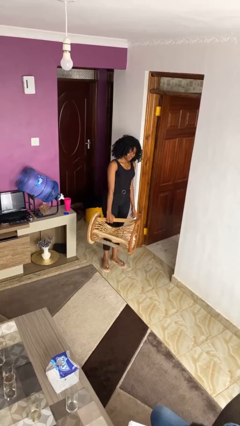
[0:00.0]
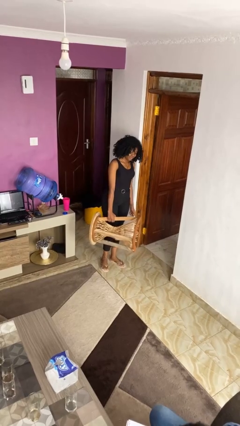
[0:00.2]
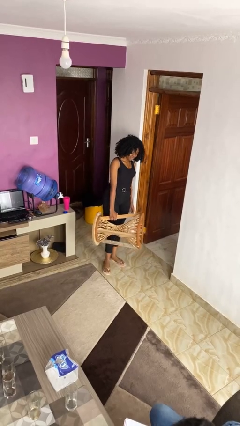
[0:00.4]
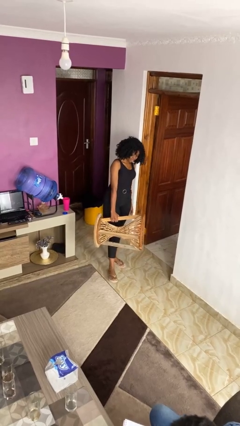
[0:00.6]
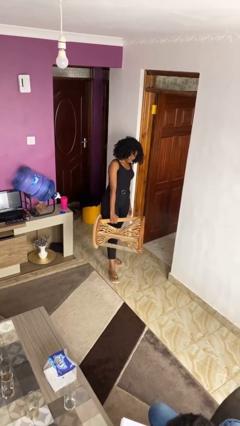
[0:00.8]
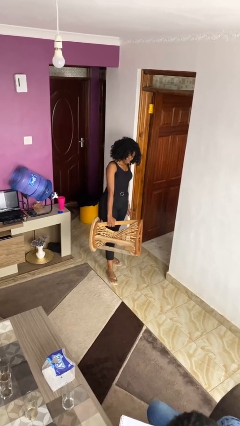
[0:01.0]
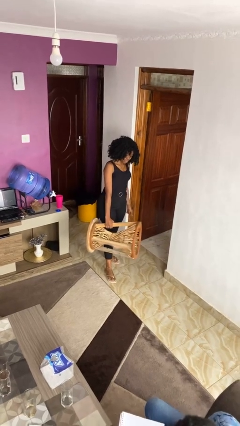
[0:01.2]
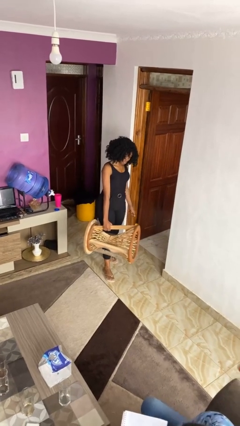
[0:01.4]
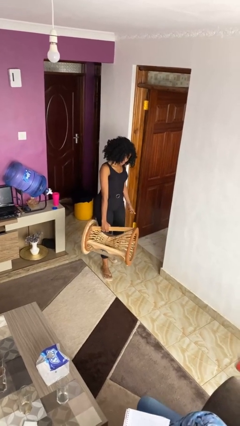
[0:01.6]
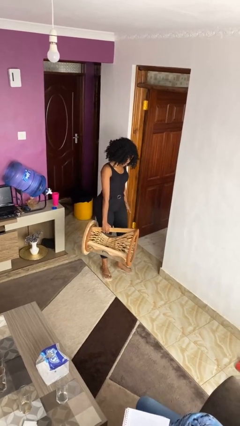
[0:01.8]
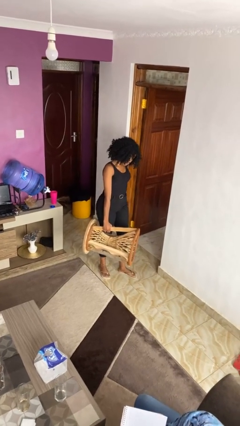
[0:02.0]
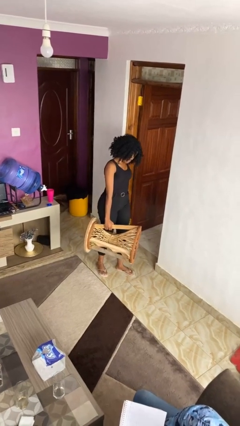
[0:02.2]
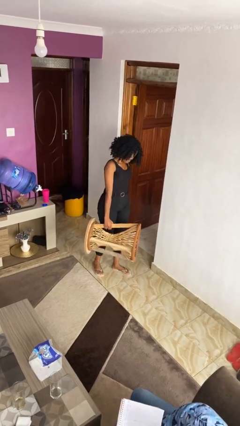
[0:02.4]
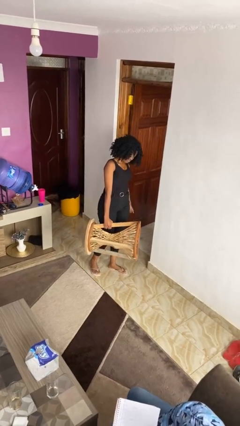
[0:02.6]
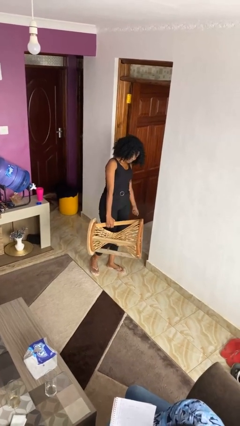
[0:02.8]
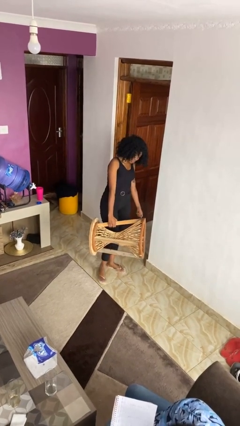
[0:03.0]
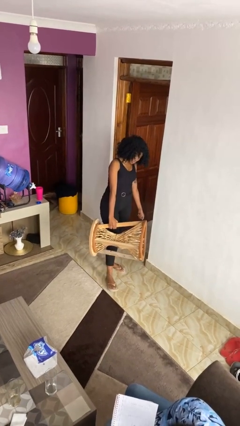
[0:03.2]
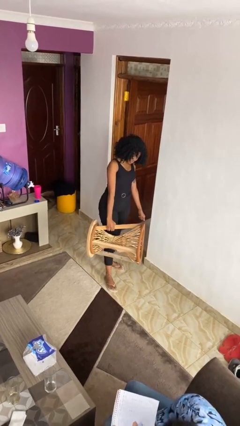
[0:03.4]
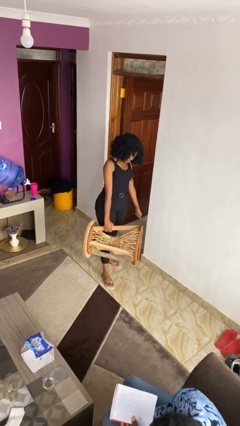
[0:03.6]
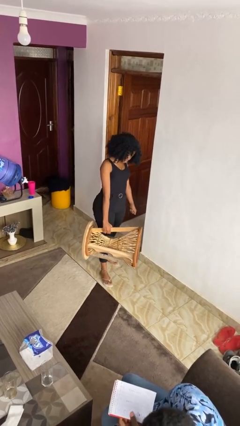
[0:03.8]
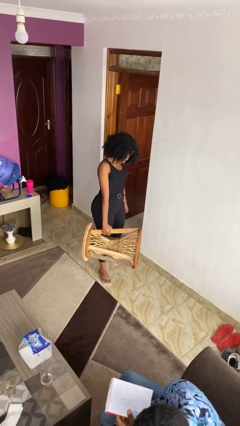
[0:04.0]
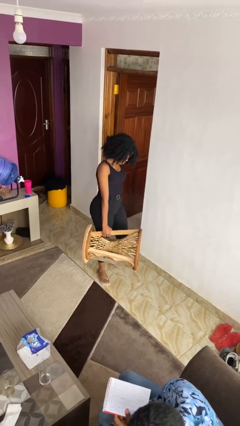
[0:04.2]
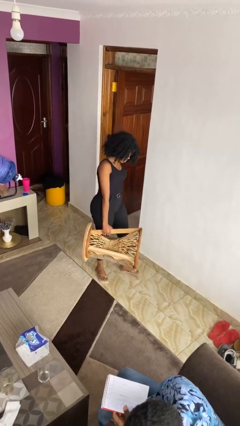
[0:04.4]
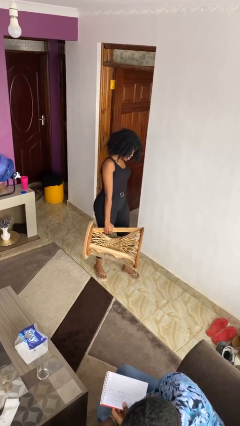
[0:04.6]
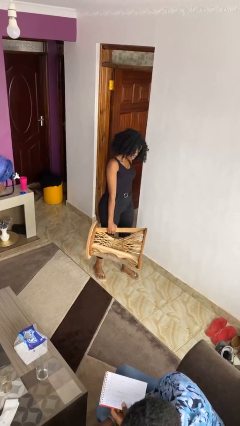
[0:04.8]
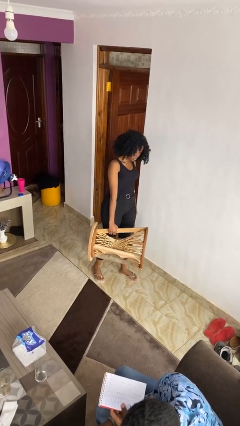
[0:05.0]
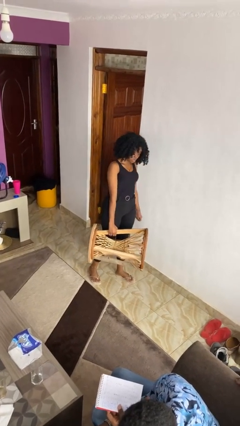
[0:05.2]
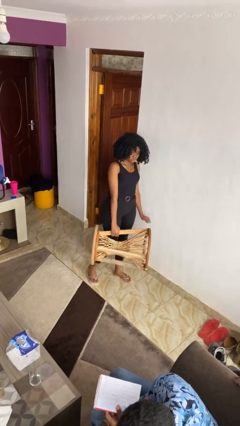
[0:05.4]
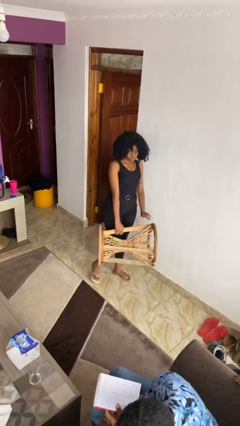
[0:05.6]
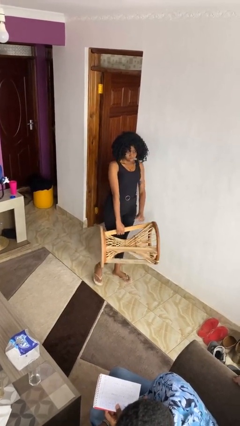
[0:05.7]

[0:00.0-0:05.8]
person carries furniture

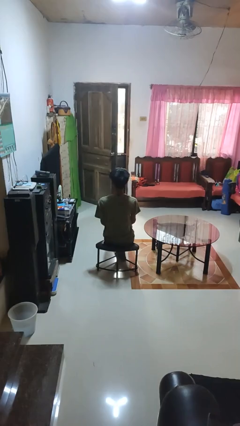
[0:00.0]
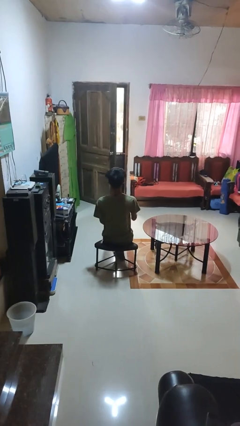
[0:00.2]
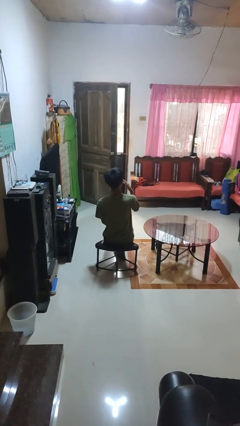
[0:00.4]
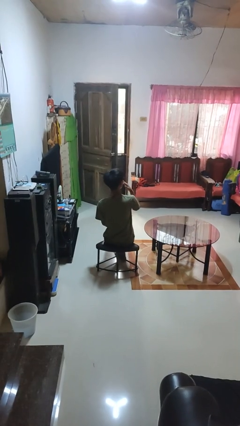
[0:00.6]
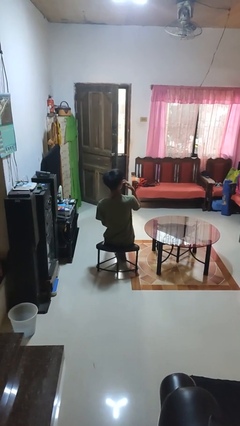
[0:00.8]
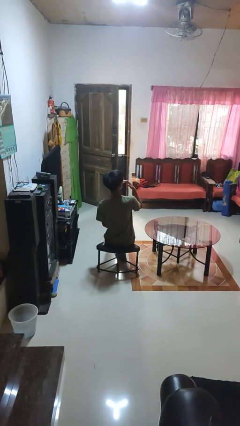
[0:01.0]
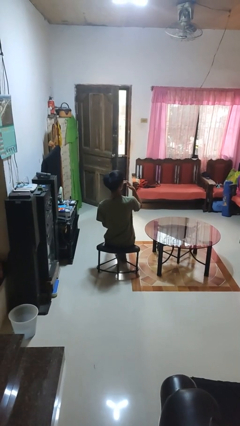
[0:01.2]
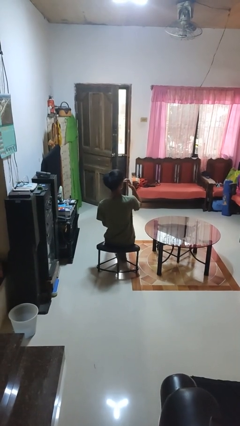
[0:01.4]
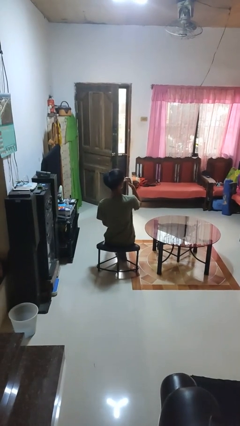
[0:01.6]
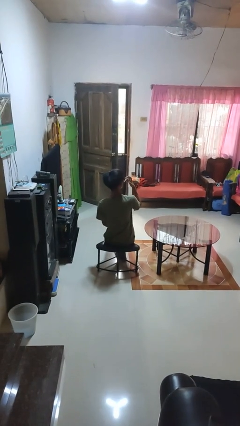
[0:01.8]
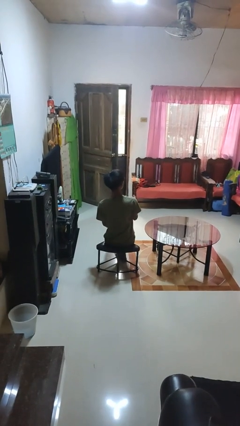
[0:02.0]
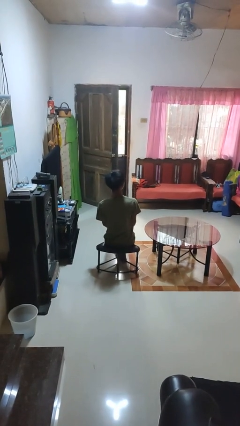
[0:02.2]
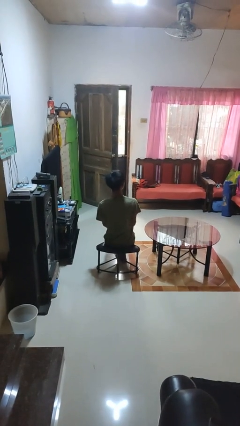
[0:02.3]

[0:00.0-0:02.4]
person licks fingers

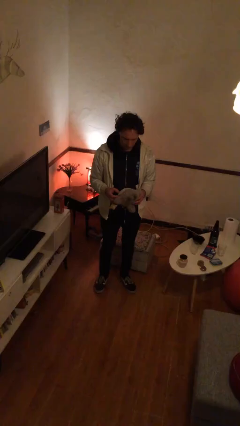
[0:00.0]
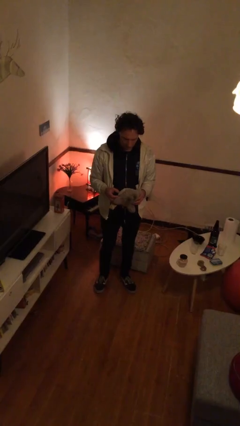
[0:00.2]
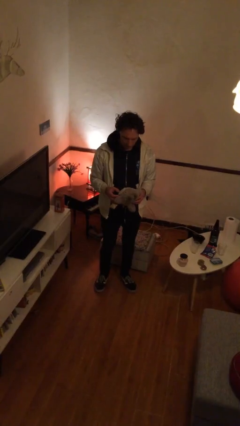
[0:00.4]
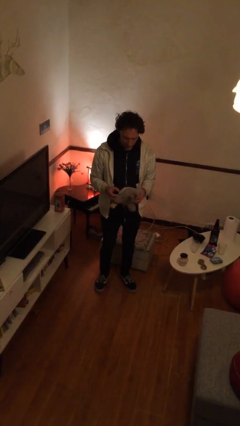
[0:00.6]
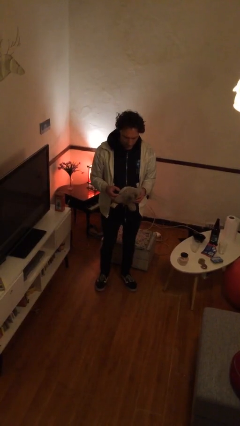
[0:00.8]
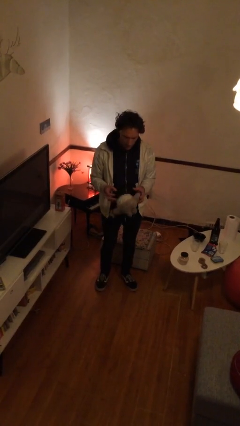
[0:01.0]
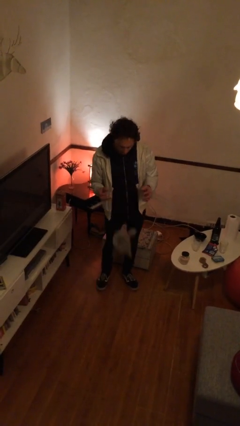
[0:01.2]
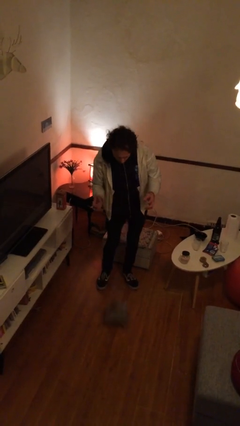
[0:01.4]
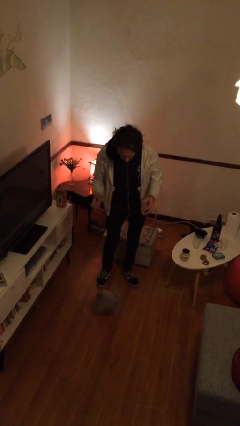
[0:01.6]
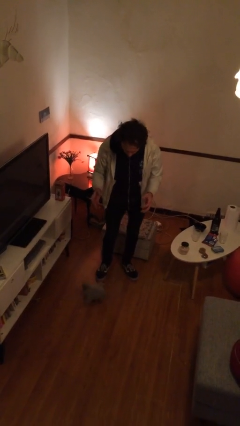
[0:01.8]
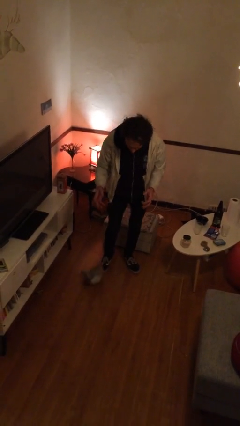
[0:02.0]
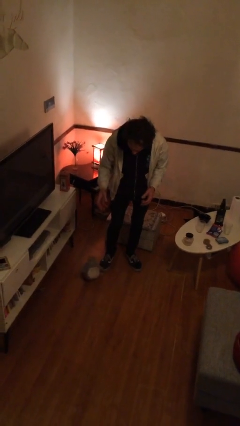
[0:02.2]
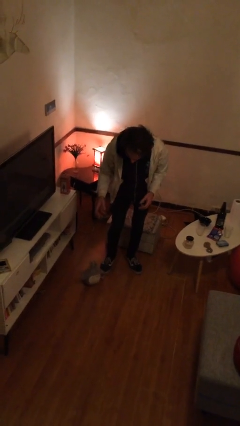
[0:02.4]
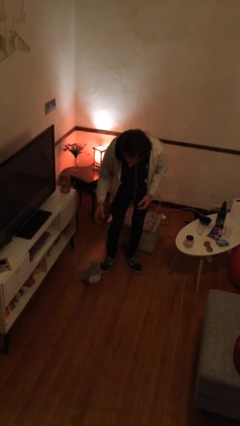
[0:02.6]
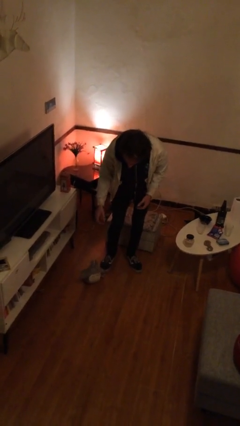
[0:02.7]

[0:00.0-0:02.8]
person drops object

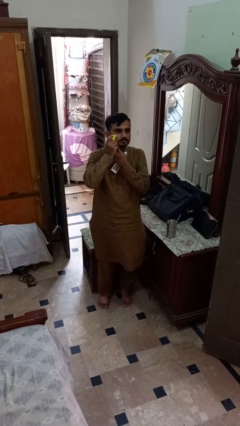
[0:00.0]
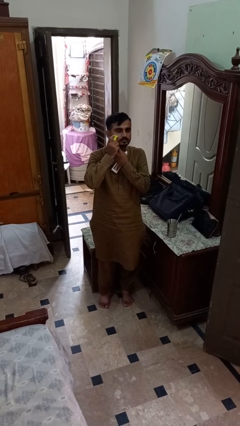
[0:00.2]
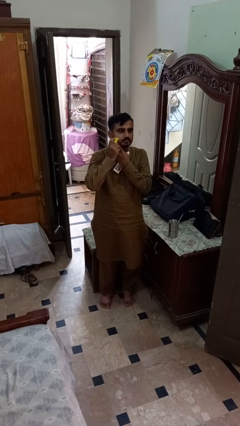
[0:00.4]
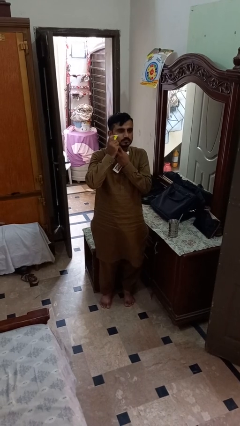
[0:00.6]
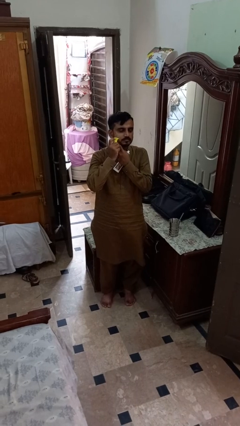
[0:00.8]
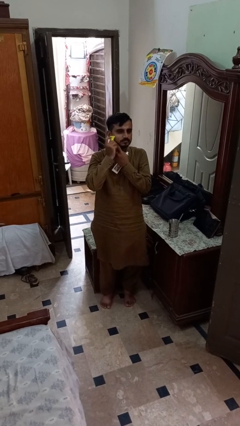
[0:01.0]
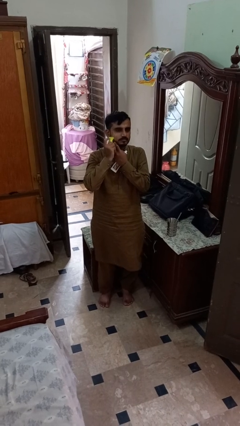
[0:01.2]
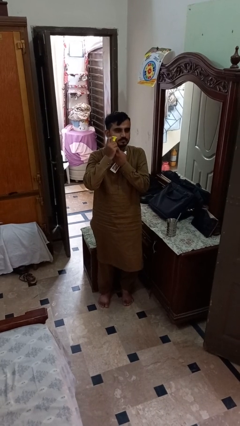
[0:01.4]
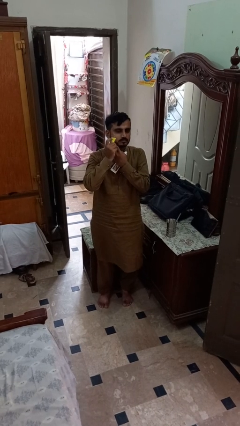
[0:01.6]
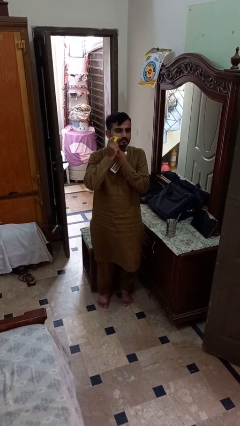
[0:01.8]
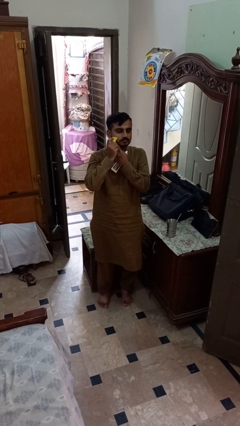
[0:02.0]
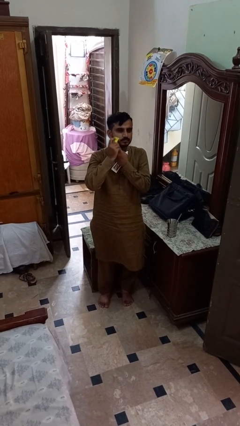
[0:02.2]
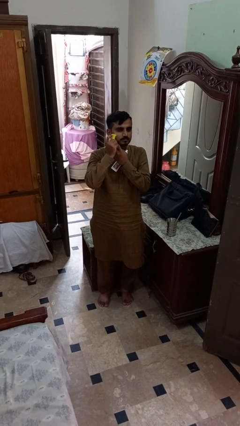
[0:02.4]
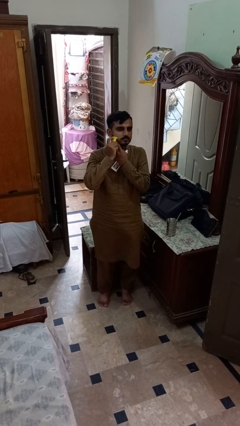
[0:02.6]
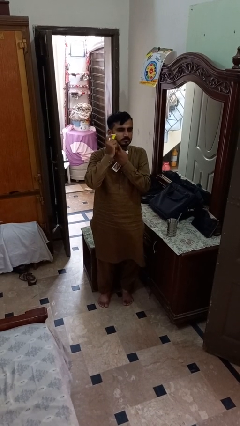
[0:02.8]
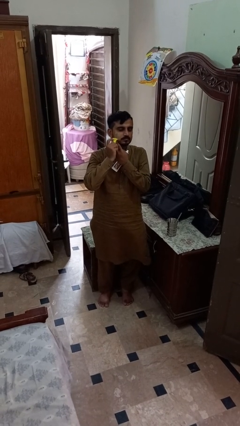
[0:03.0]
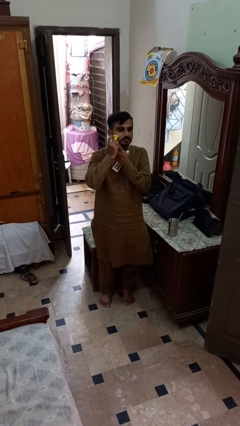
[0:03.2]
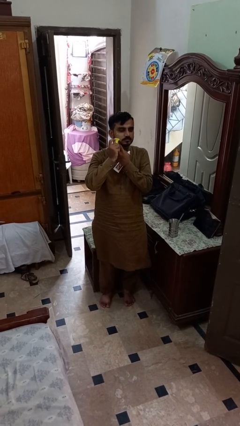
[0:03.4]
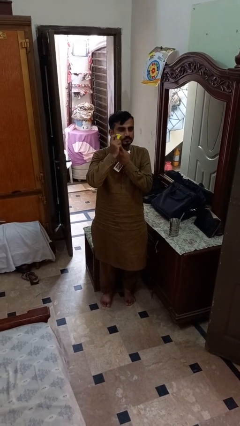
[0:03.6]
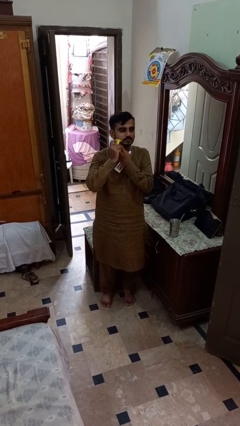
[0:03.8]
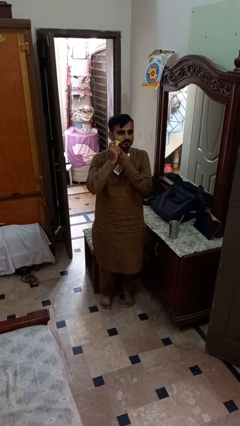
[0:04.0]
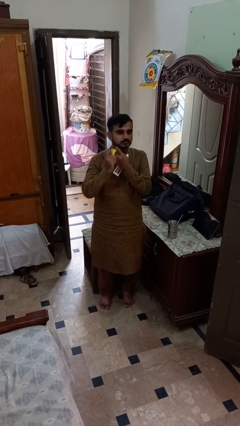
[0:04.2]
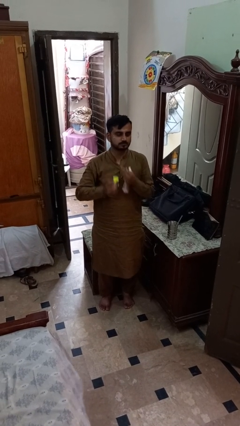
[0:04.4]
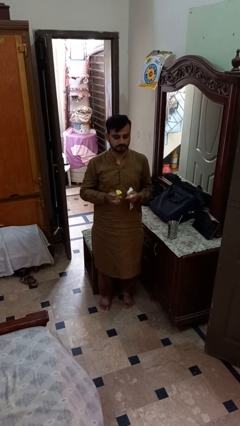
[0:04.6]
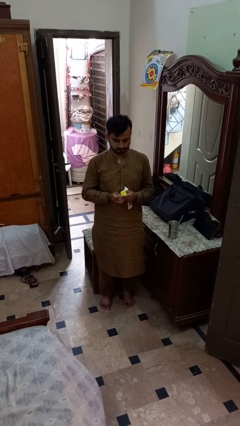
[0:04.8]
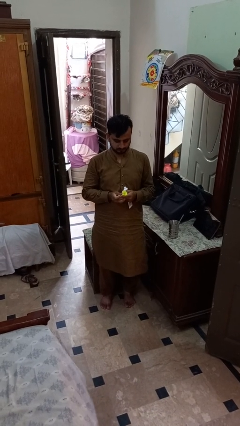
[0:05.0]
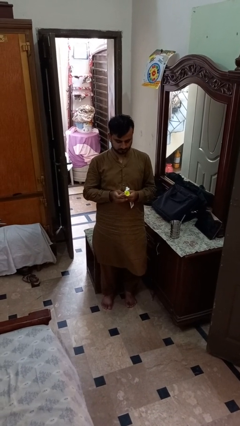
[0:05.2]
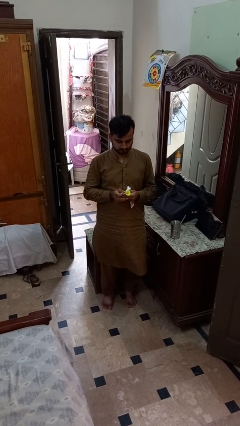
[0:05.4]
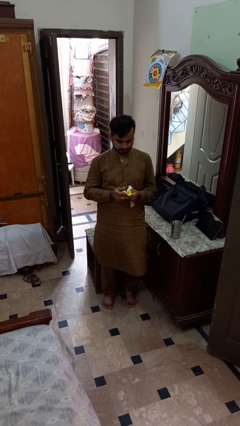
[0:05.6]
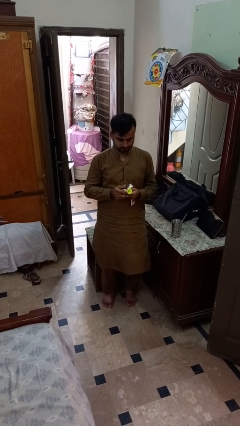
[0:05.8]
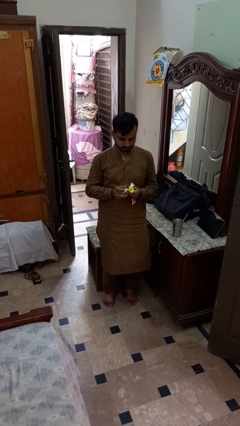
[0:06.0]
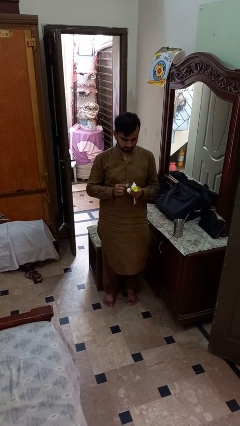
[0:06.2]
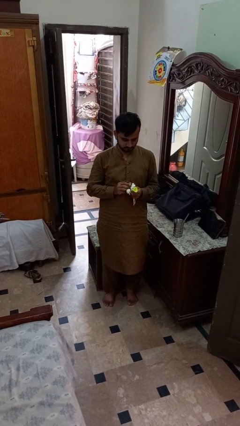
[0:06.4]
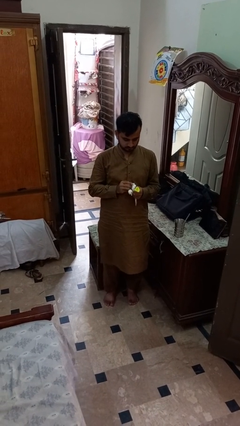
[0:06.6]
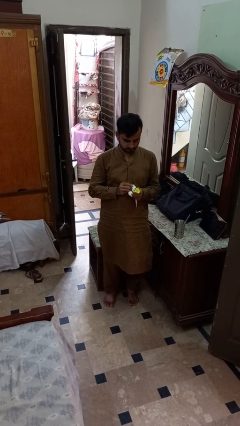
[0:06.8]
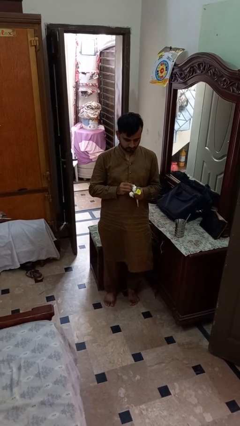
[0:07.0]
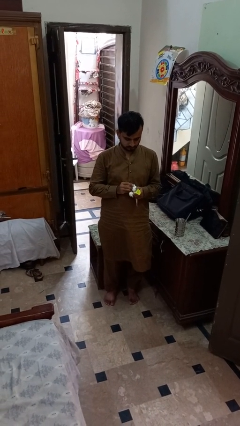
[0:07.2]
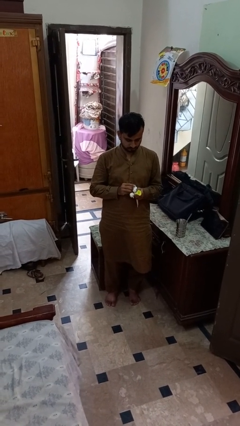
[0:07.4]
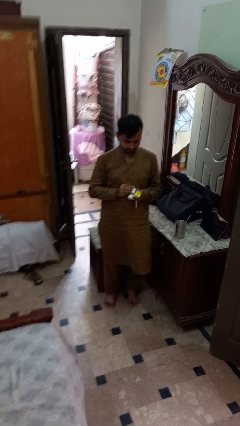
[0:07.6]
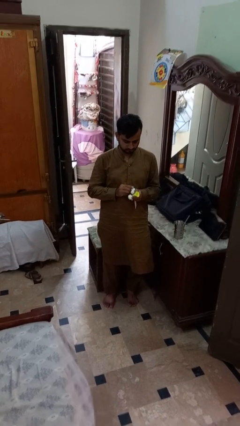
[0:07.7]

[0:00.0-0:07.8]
person shaves face
